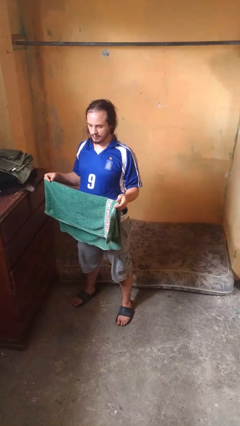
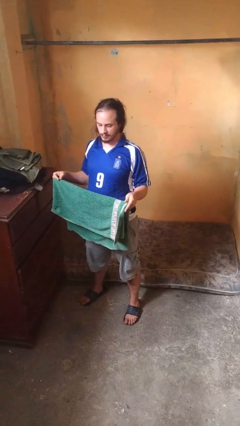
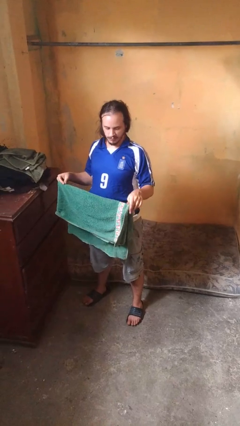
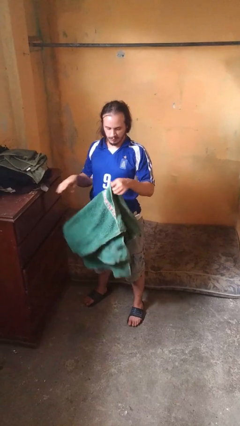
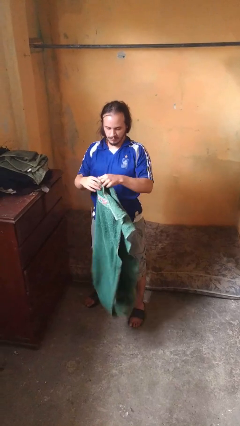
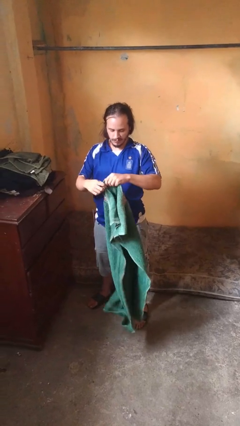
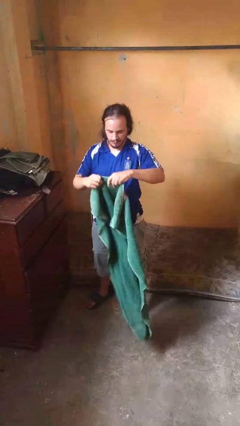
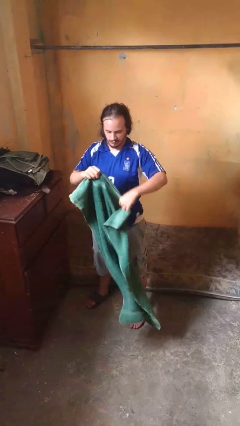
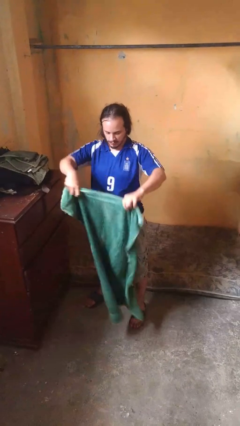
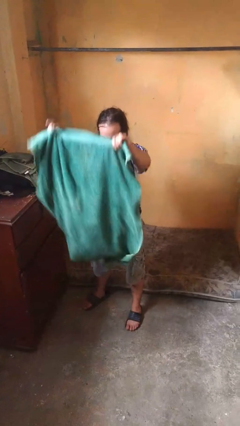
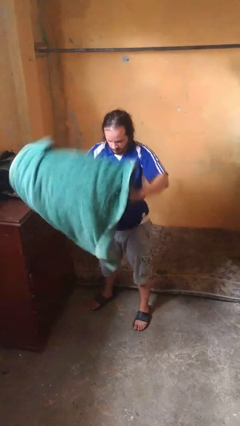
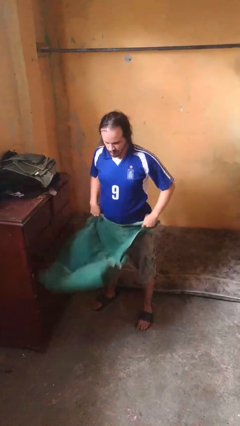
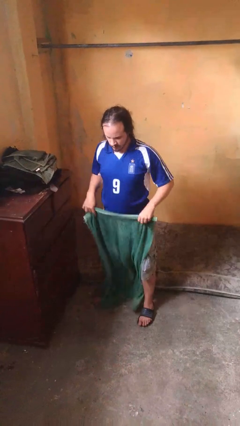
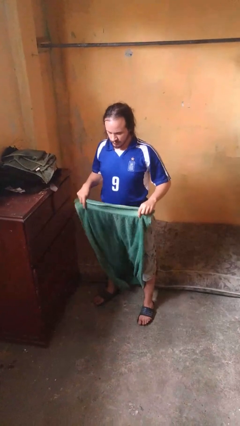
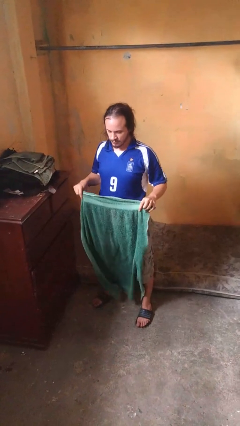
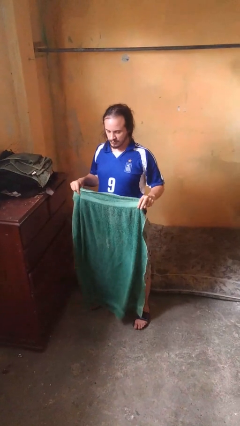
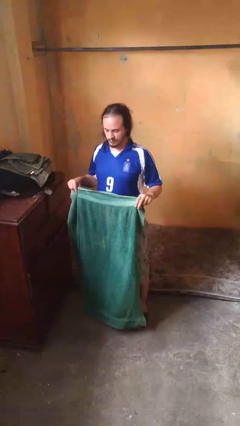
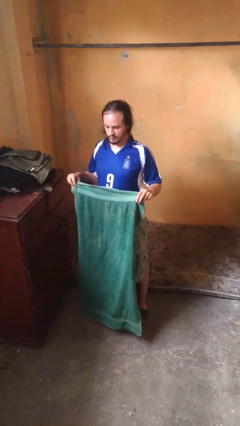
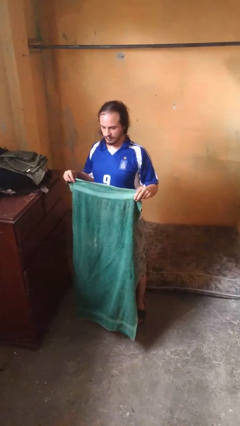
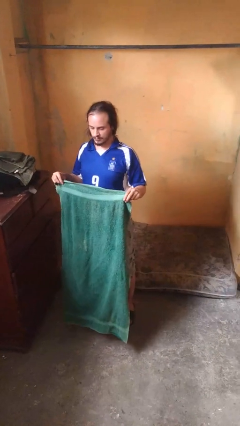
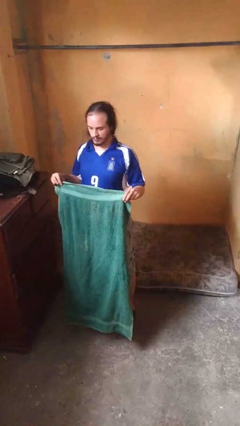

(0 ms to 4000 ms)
person unfolds blanket

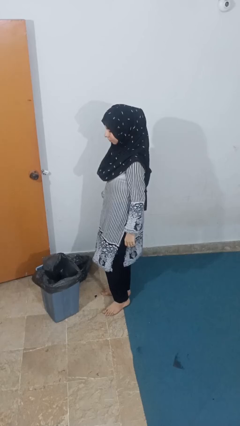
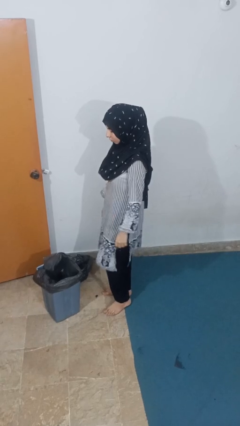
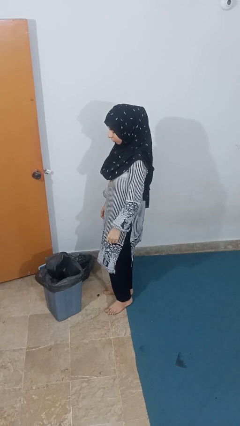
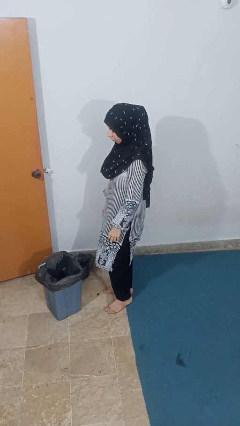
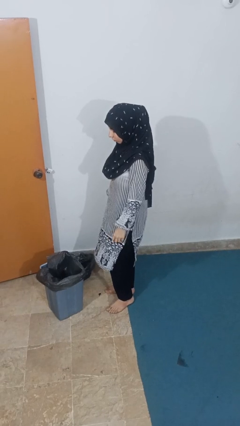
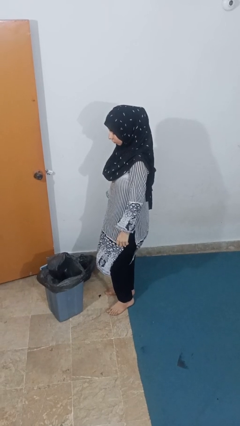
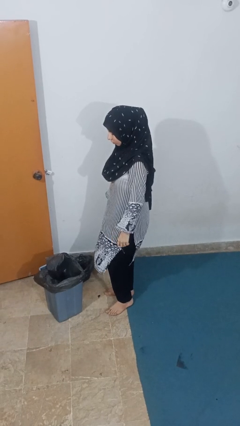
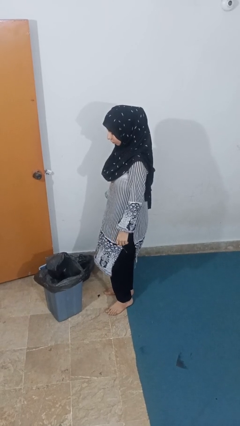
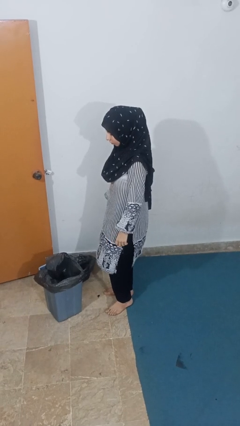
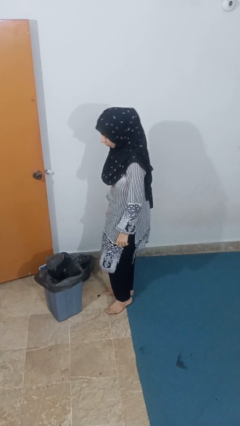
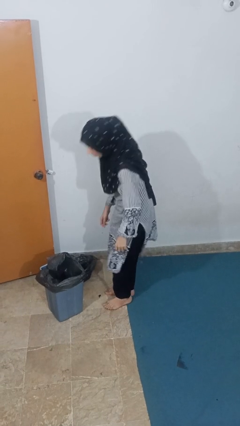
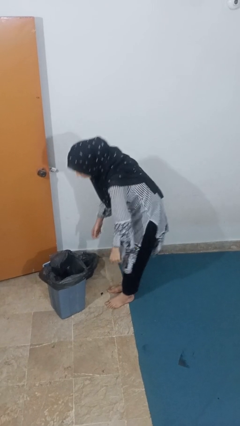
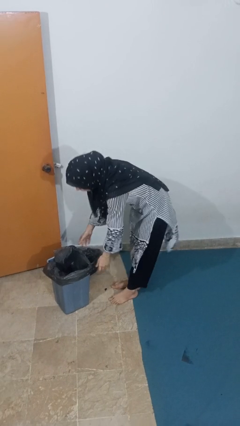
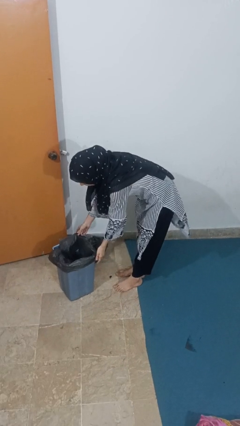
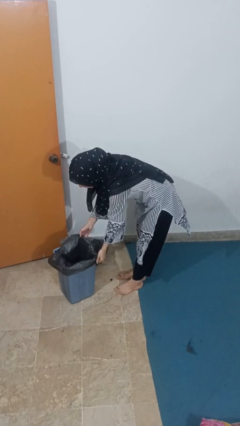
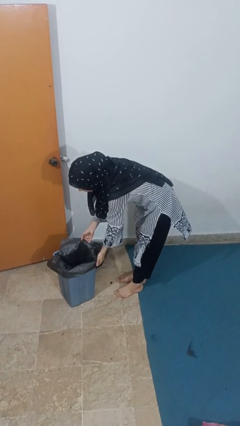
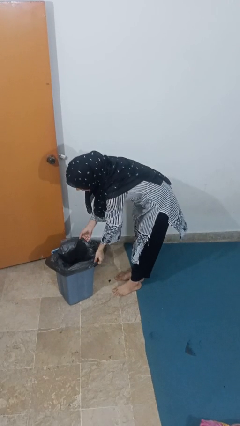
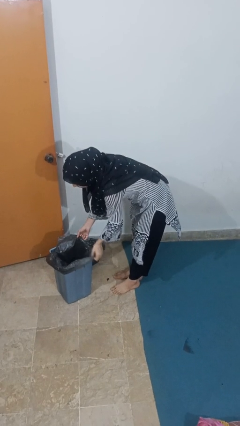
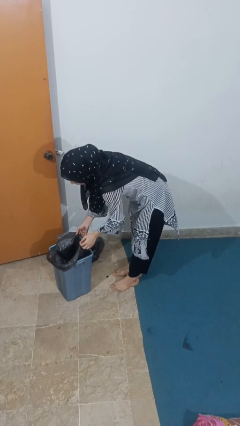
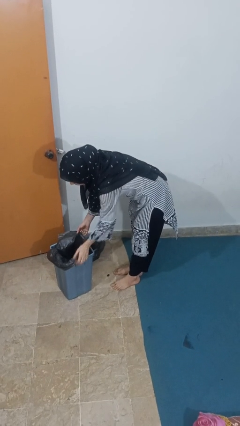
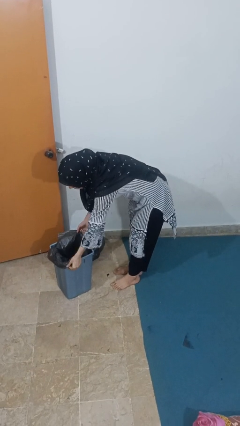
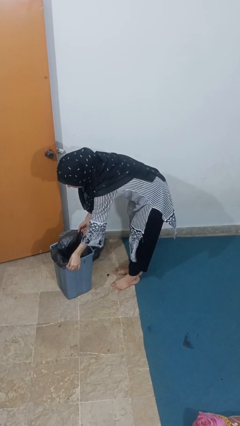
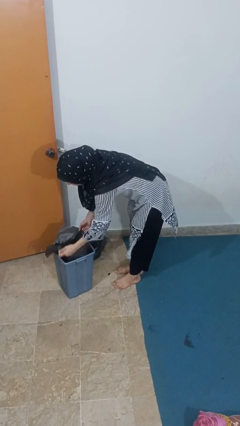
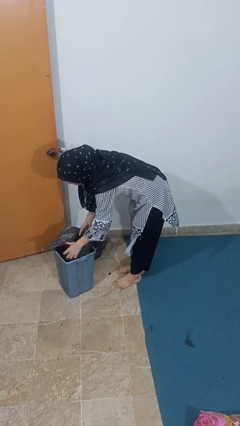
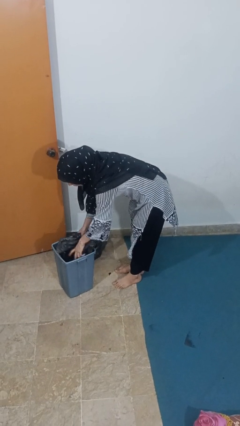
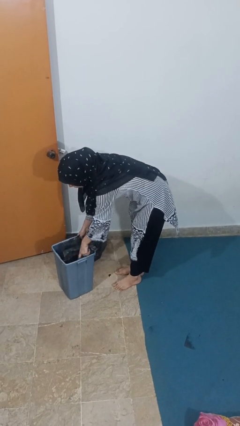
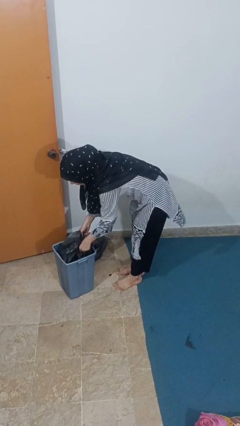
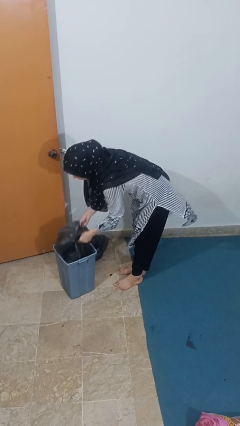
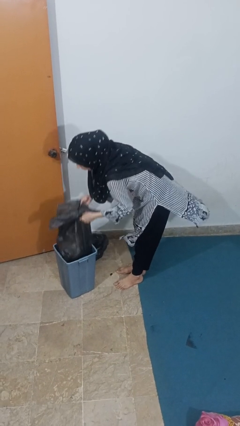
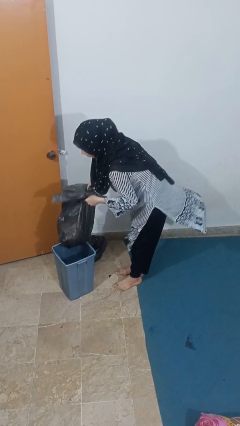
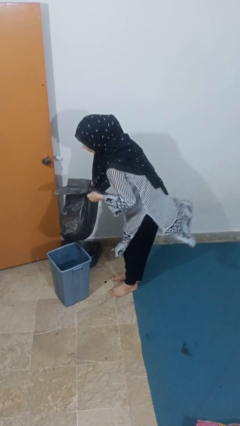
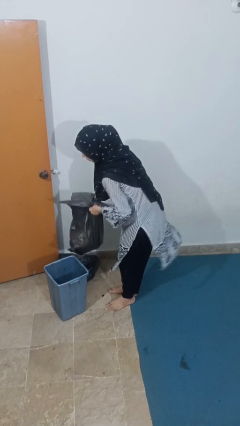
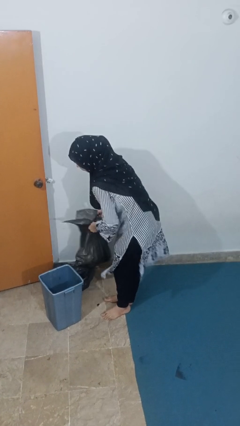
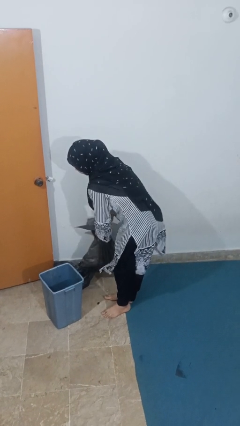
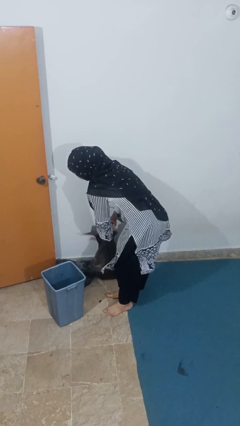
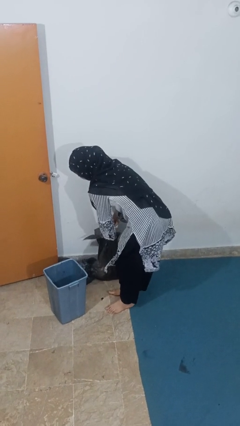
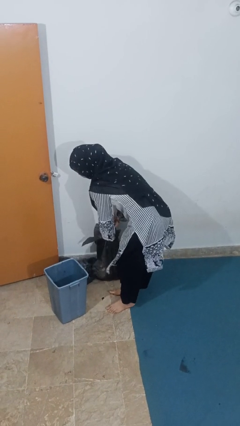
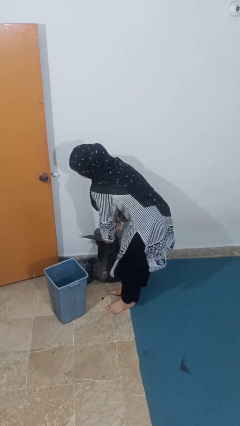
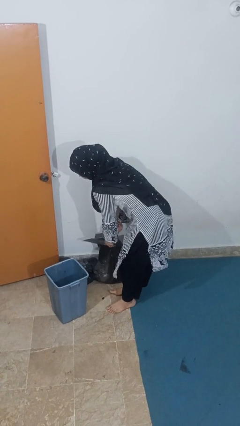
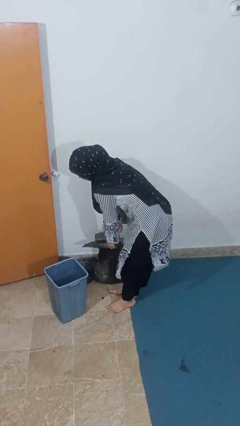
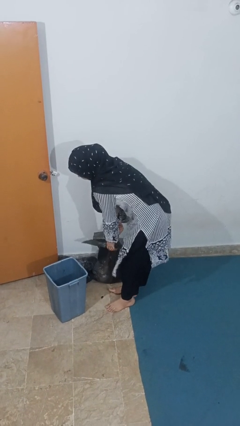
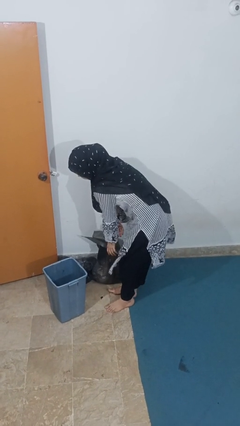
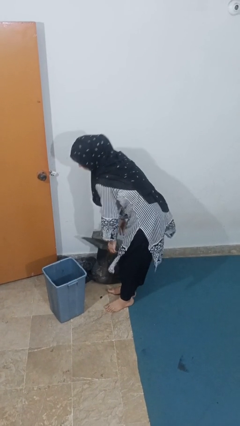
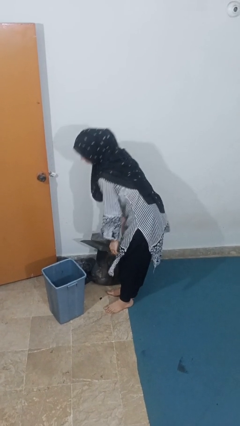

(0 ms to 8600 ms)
person removes trashbag from trashcan

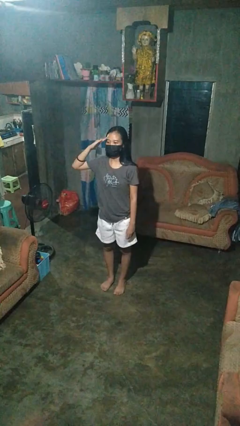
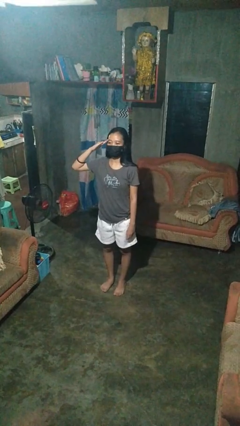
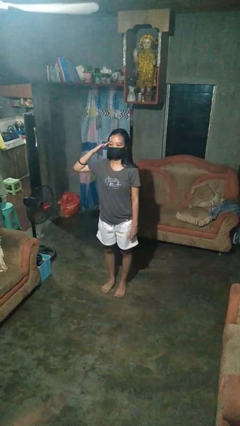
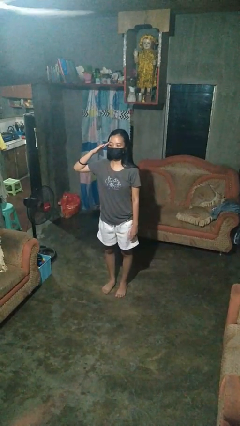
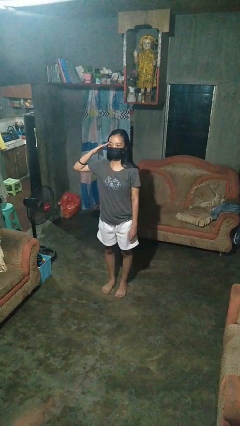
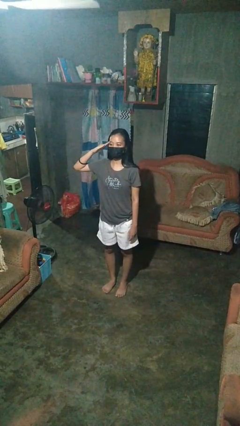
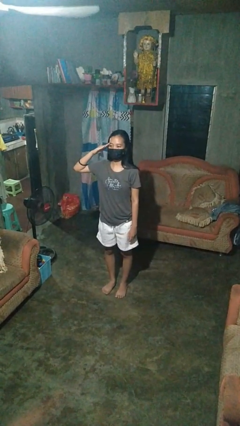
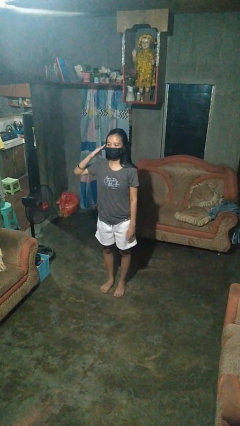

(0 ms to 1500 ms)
person salutes

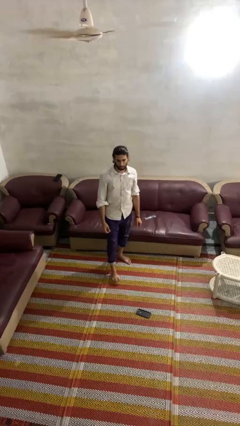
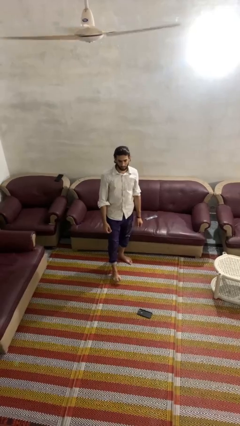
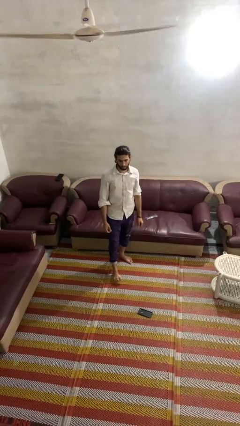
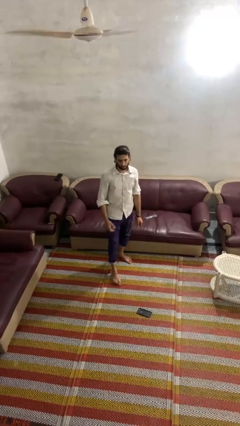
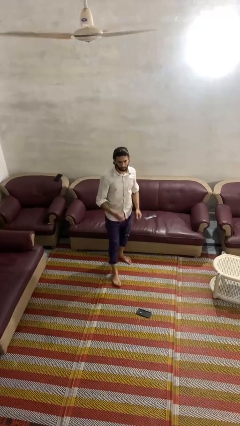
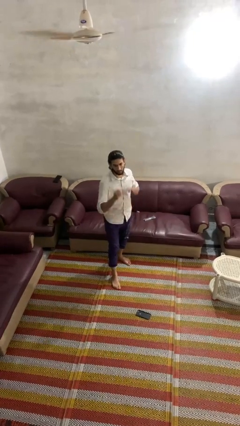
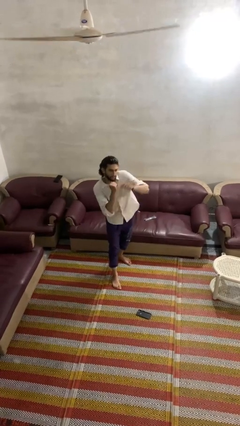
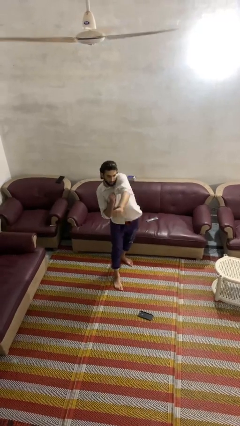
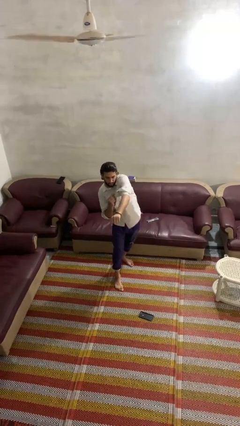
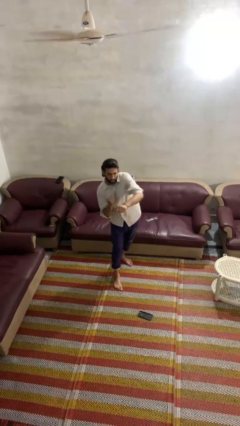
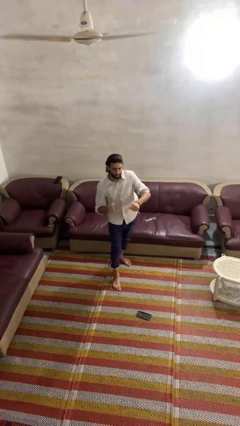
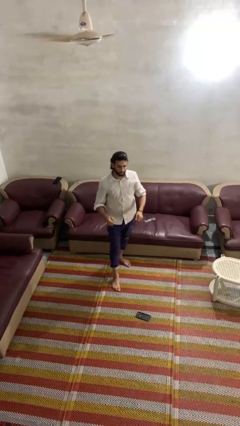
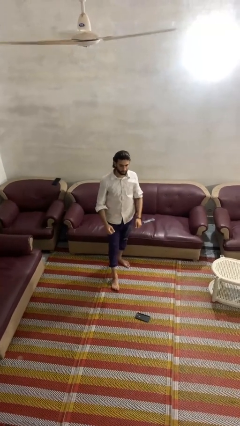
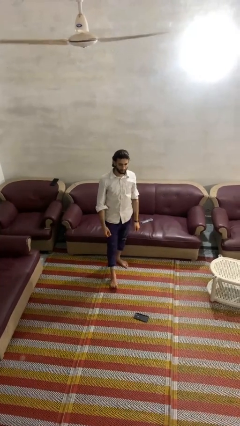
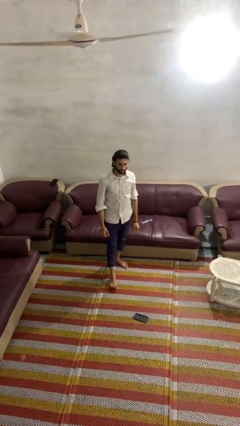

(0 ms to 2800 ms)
person punches

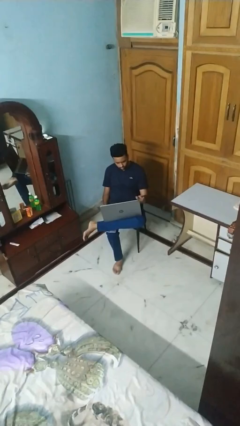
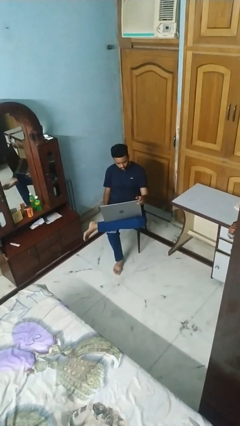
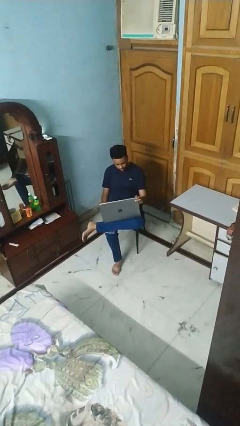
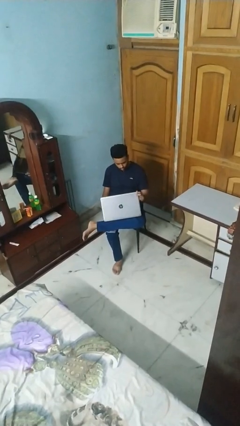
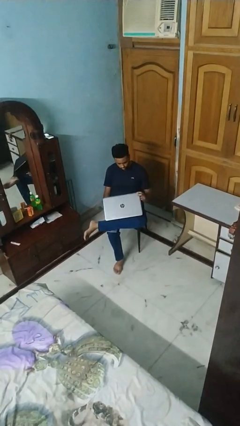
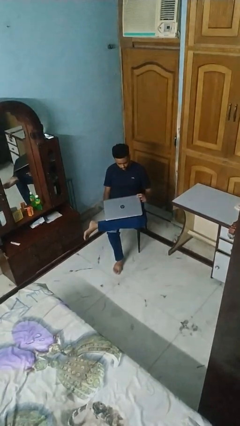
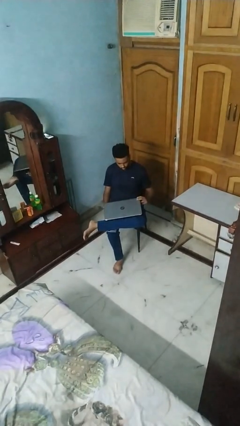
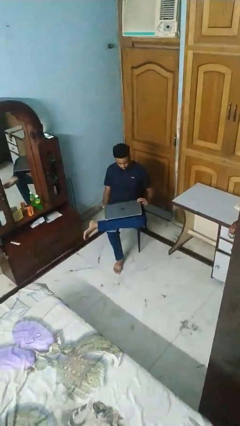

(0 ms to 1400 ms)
person closes laptop
